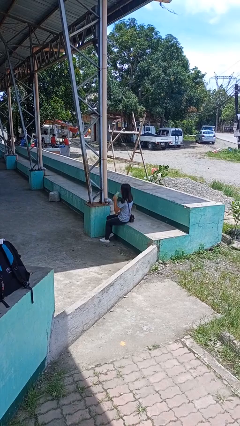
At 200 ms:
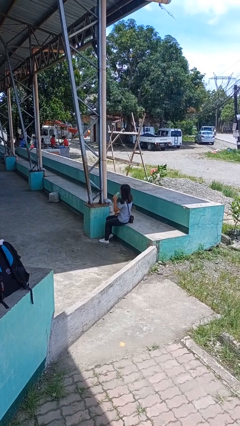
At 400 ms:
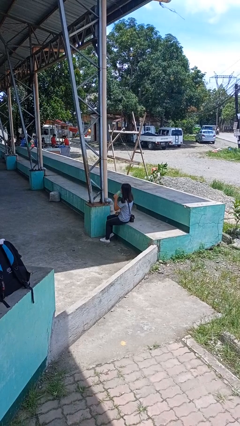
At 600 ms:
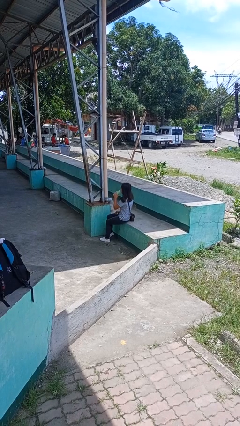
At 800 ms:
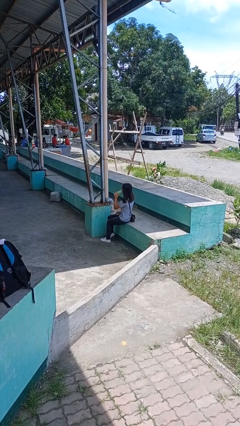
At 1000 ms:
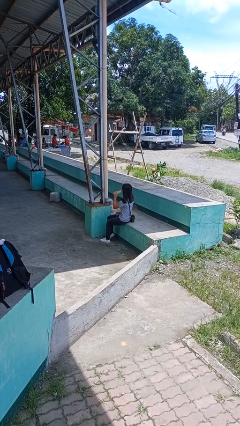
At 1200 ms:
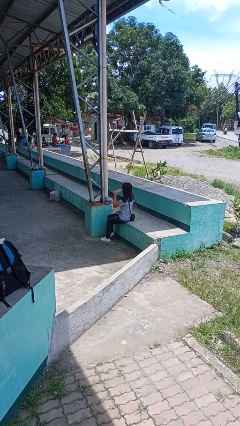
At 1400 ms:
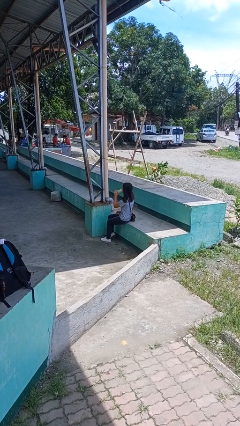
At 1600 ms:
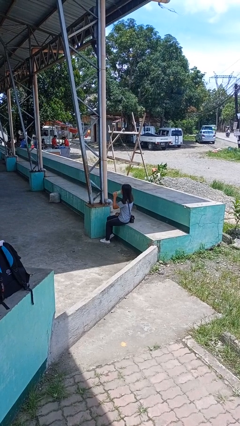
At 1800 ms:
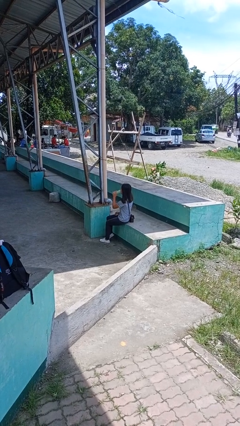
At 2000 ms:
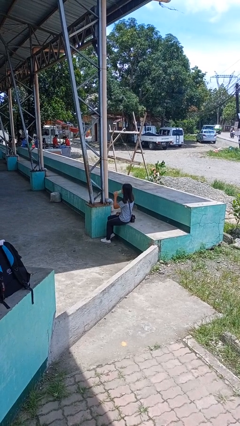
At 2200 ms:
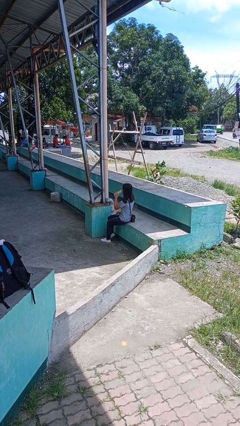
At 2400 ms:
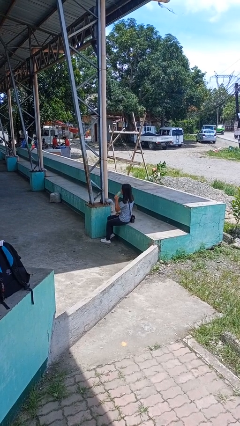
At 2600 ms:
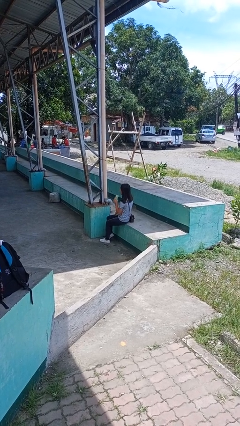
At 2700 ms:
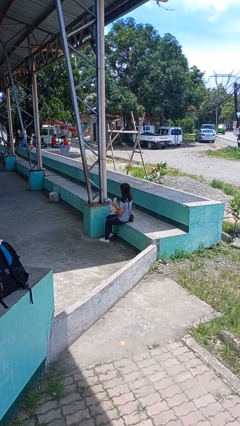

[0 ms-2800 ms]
person drinks from bottle

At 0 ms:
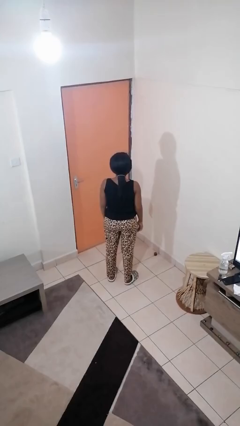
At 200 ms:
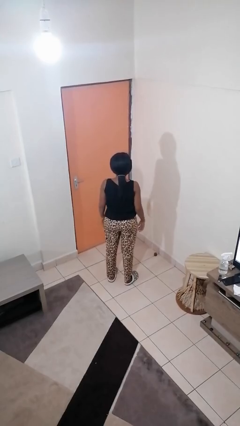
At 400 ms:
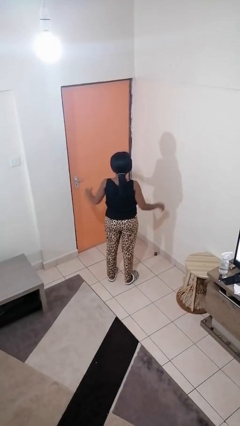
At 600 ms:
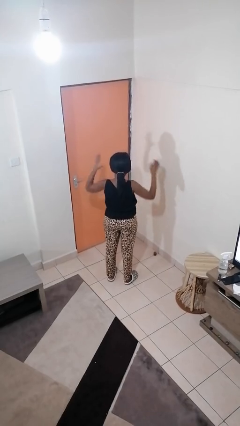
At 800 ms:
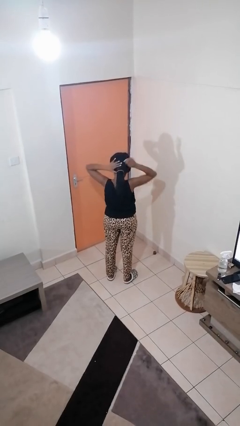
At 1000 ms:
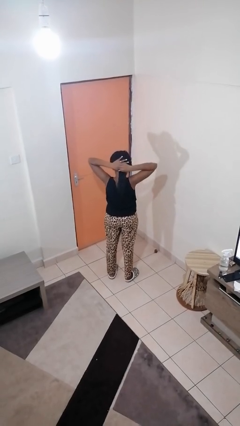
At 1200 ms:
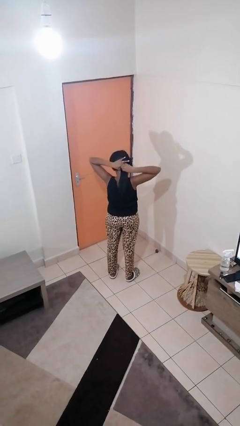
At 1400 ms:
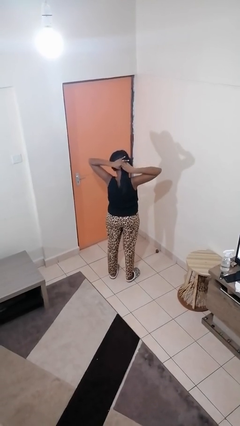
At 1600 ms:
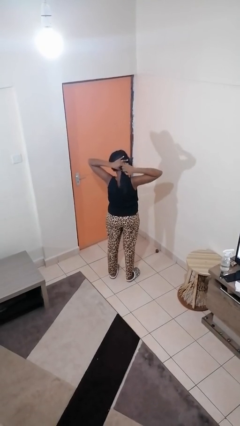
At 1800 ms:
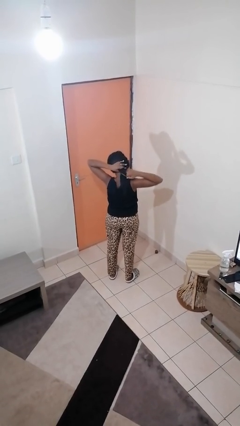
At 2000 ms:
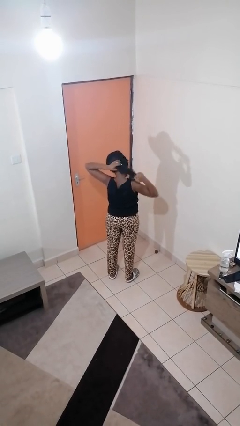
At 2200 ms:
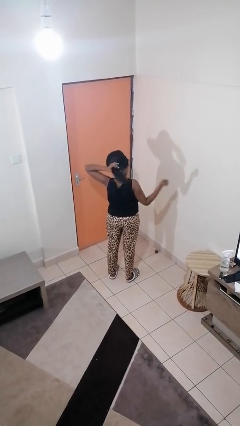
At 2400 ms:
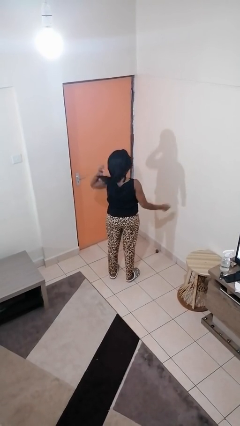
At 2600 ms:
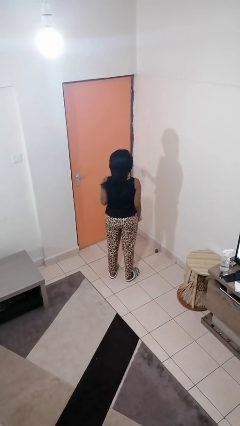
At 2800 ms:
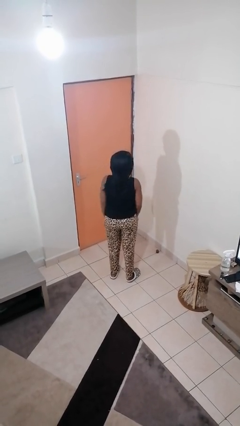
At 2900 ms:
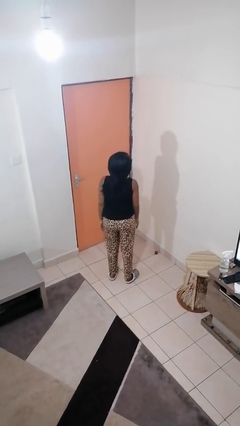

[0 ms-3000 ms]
person takes off hairtie

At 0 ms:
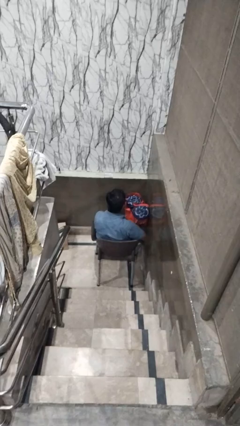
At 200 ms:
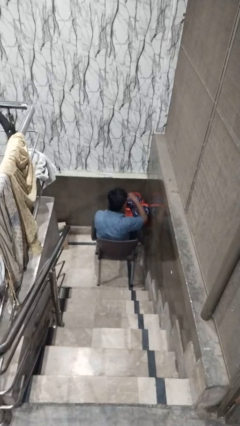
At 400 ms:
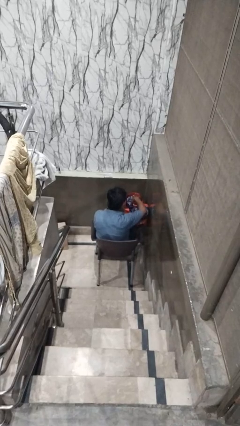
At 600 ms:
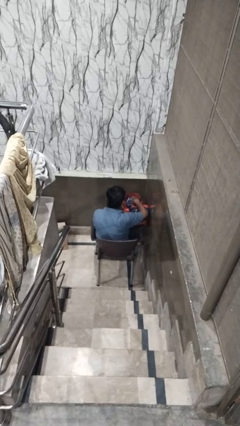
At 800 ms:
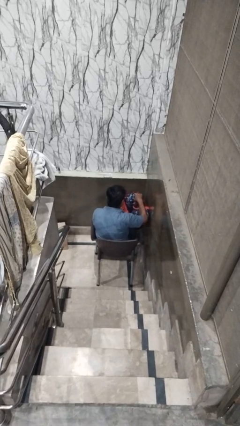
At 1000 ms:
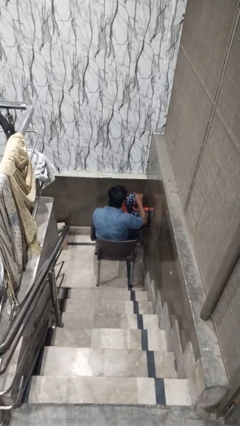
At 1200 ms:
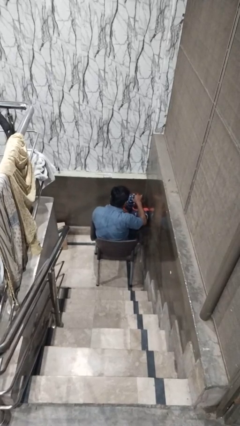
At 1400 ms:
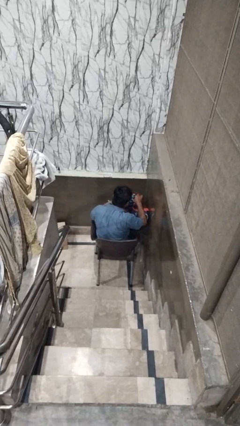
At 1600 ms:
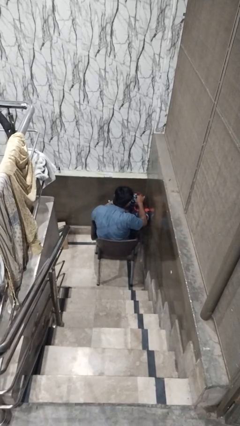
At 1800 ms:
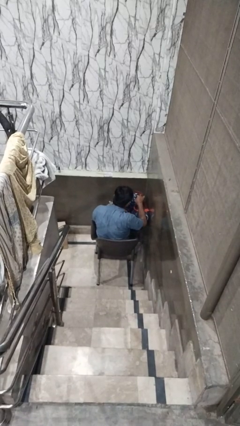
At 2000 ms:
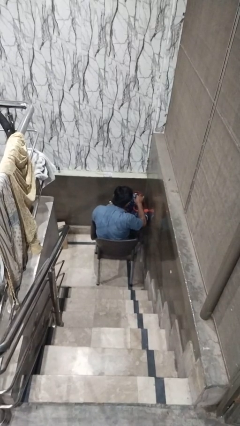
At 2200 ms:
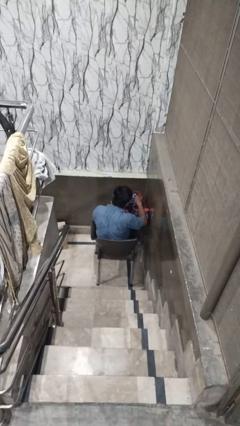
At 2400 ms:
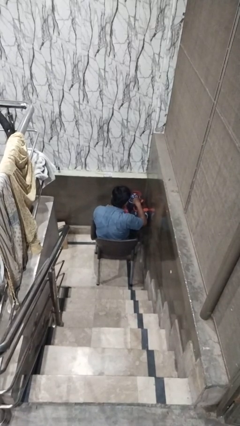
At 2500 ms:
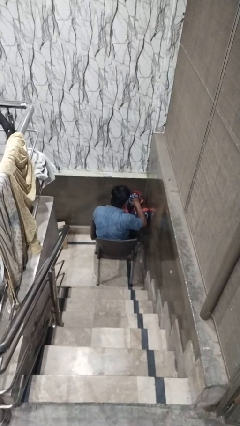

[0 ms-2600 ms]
person searches in bag

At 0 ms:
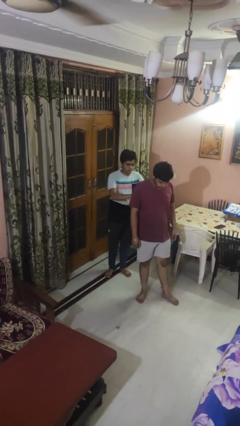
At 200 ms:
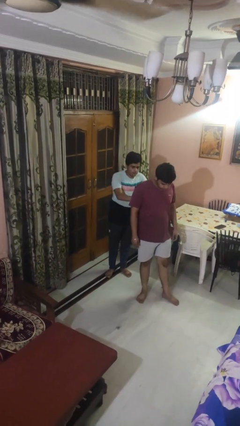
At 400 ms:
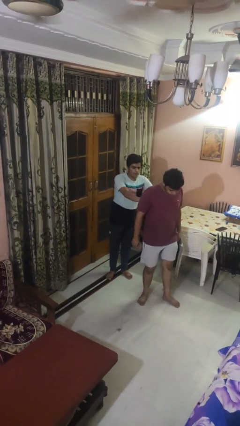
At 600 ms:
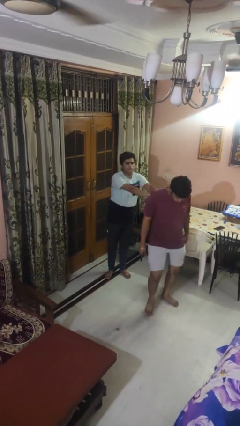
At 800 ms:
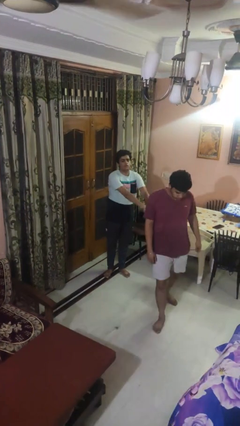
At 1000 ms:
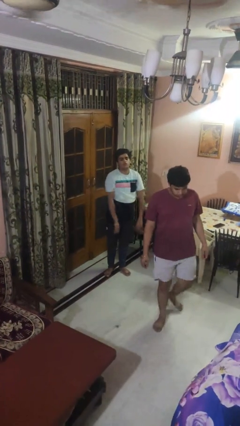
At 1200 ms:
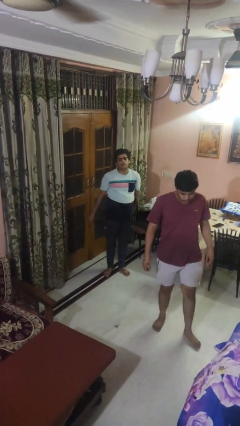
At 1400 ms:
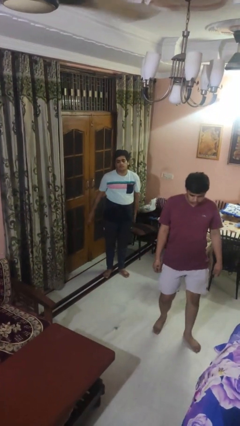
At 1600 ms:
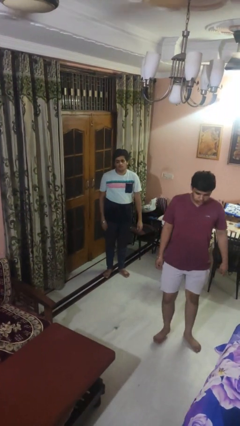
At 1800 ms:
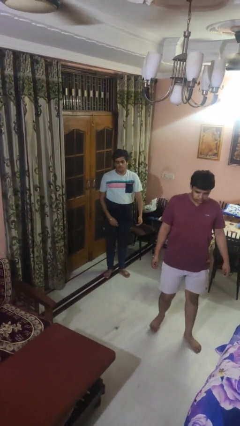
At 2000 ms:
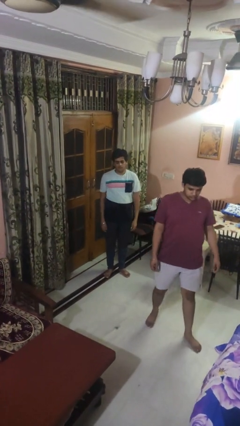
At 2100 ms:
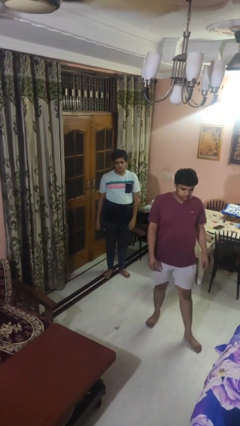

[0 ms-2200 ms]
person shoves person

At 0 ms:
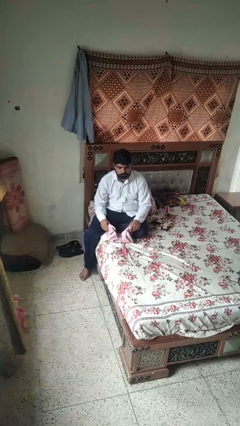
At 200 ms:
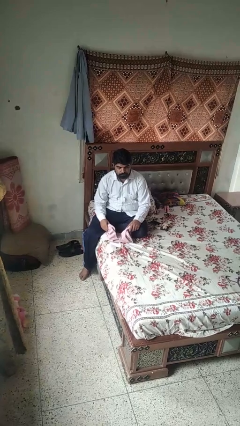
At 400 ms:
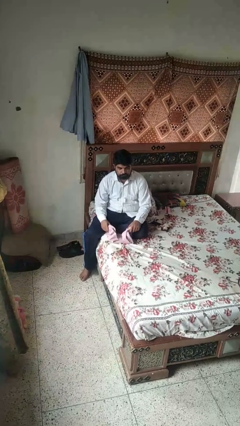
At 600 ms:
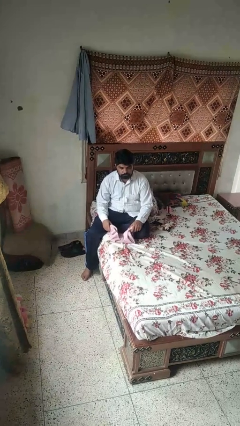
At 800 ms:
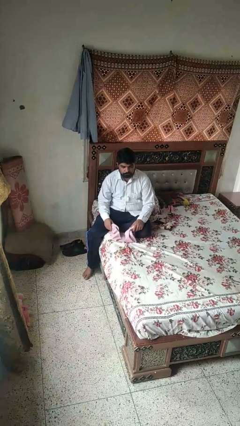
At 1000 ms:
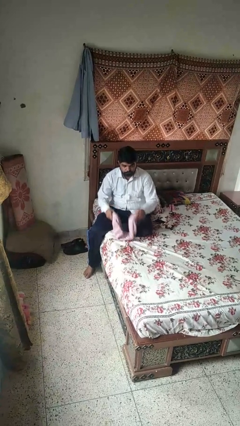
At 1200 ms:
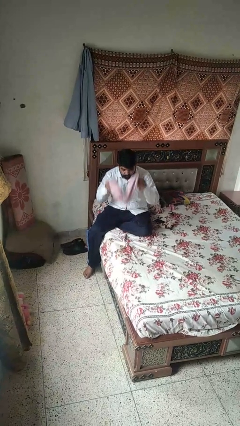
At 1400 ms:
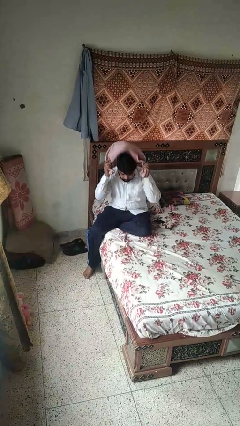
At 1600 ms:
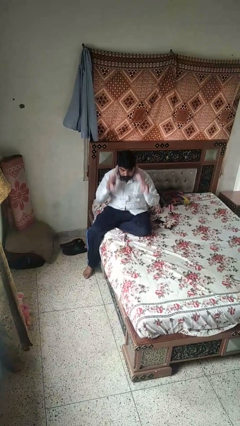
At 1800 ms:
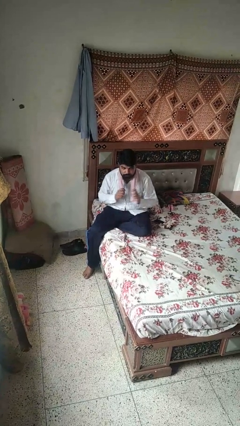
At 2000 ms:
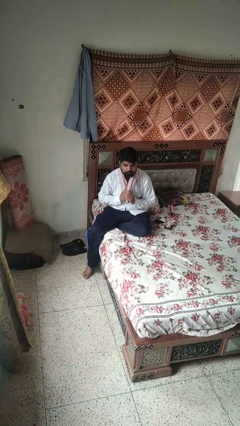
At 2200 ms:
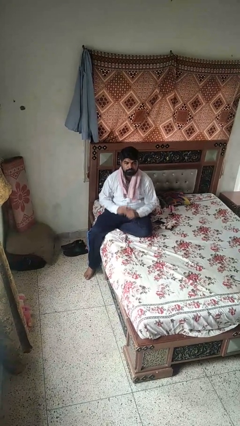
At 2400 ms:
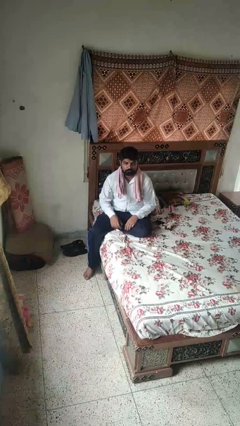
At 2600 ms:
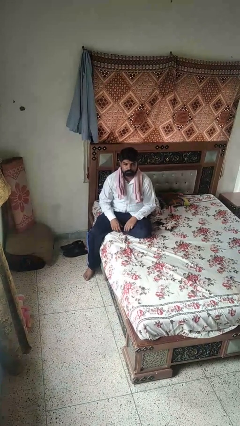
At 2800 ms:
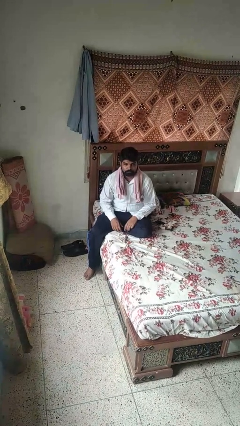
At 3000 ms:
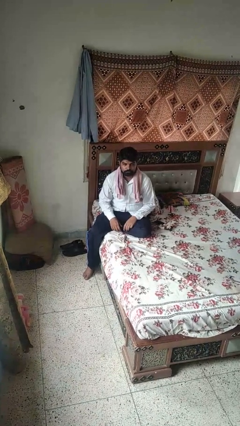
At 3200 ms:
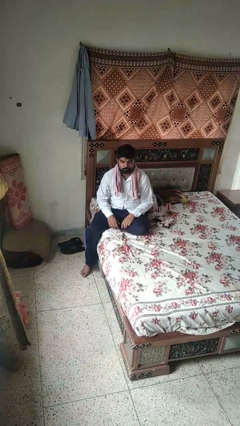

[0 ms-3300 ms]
person puts on scarf

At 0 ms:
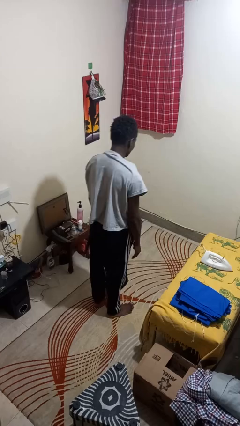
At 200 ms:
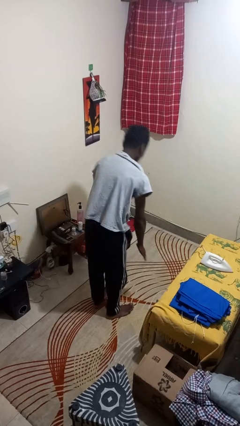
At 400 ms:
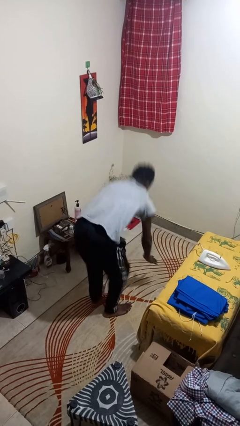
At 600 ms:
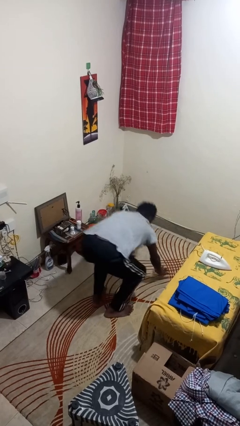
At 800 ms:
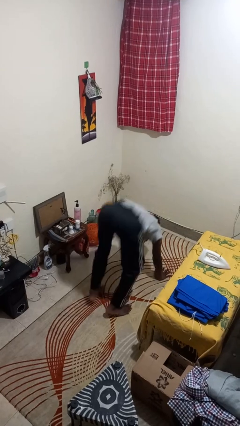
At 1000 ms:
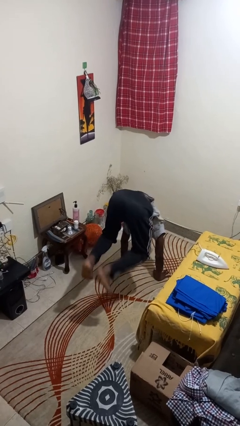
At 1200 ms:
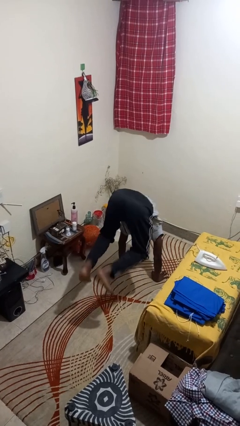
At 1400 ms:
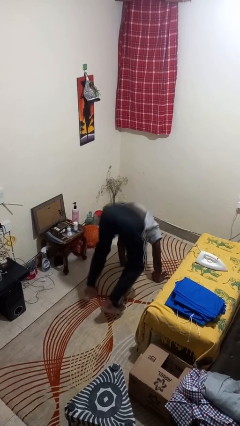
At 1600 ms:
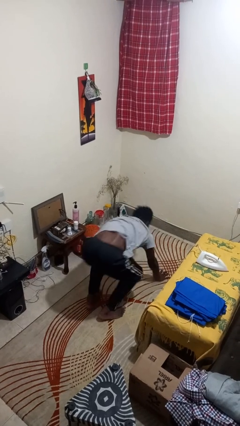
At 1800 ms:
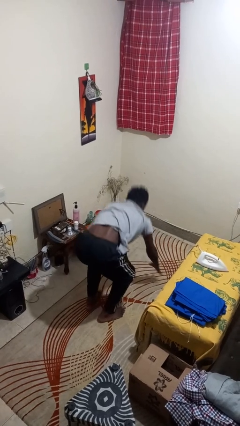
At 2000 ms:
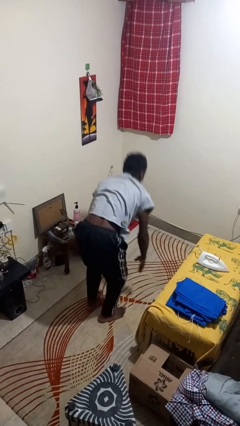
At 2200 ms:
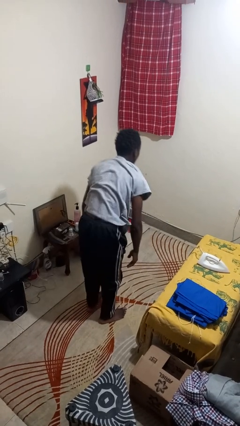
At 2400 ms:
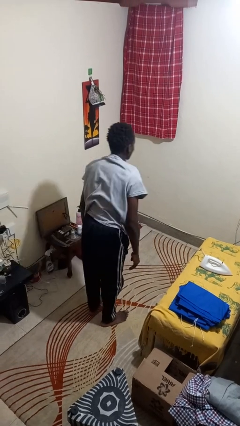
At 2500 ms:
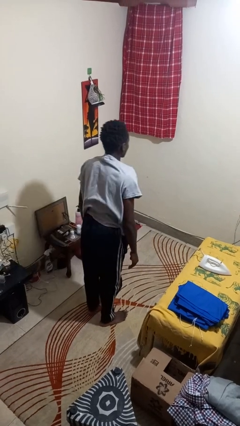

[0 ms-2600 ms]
person handstand

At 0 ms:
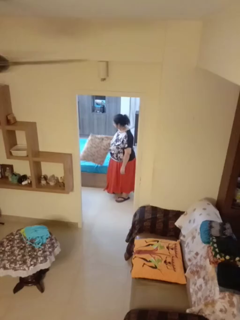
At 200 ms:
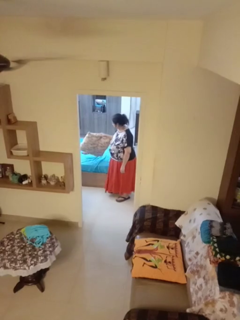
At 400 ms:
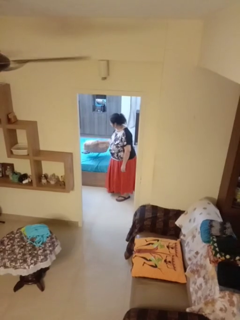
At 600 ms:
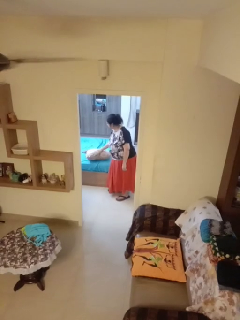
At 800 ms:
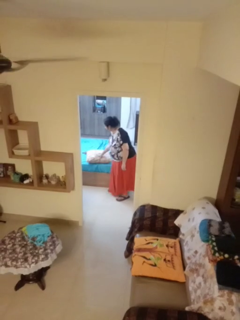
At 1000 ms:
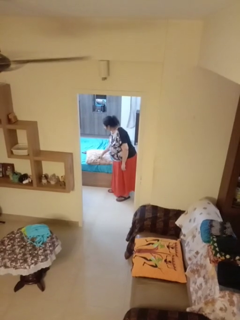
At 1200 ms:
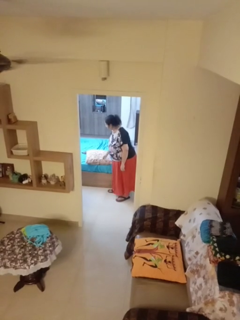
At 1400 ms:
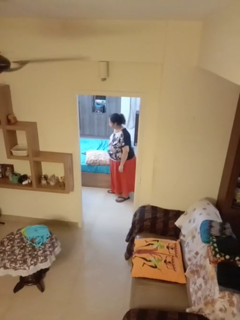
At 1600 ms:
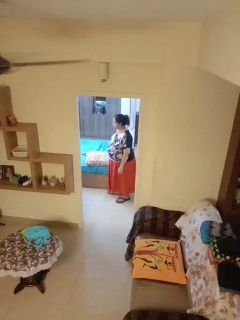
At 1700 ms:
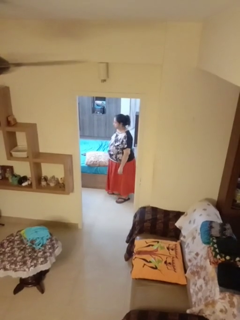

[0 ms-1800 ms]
person puts down object on bed
